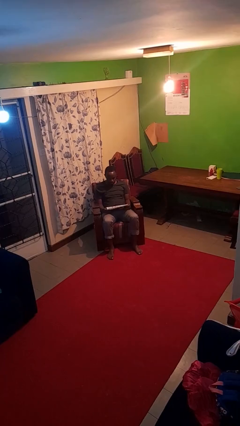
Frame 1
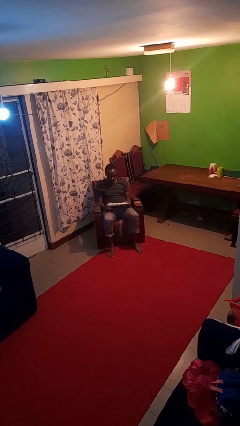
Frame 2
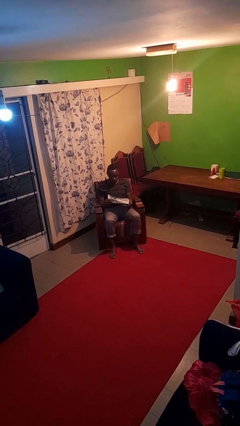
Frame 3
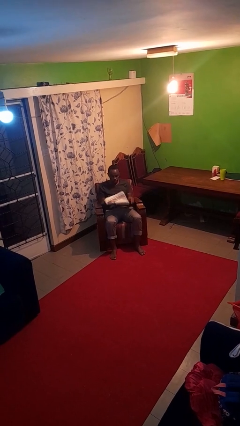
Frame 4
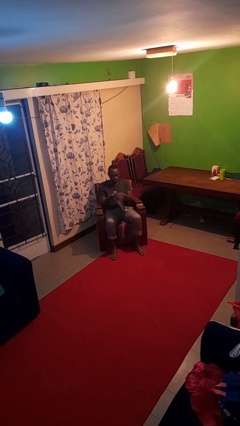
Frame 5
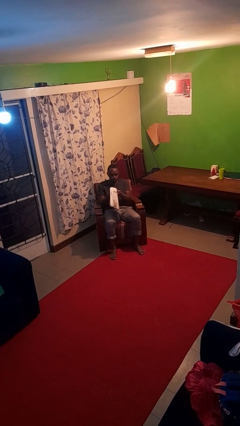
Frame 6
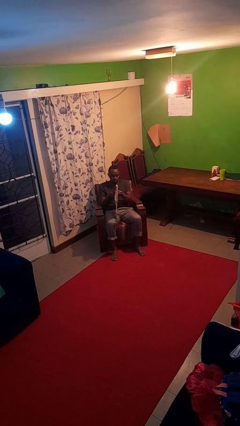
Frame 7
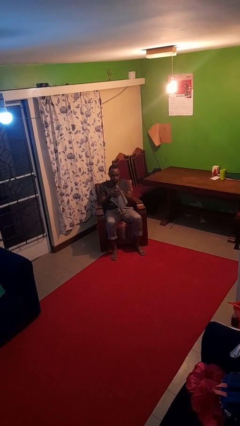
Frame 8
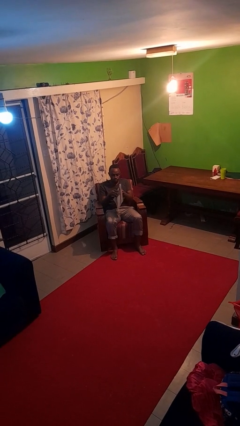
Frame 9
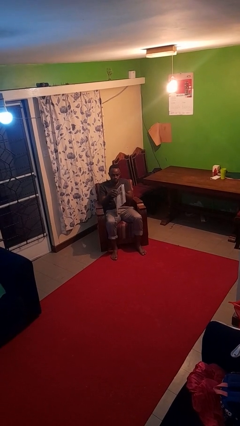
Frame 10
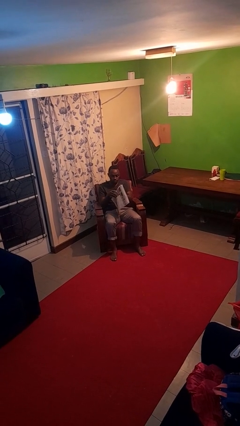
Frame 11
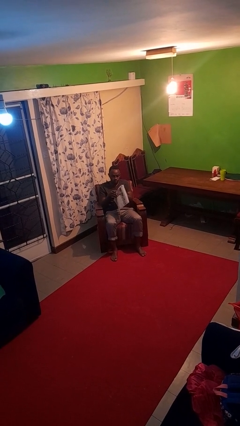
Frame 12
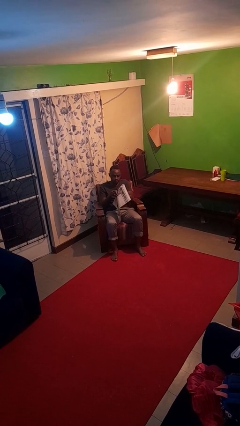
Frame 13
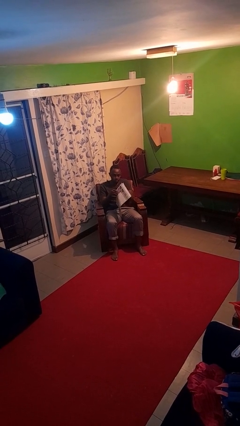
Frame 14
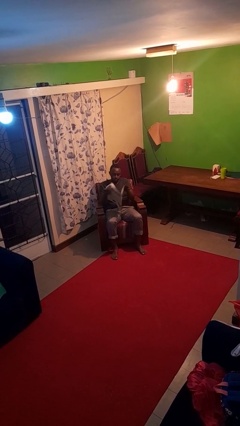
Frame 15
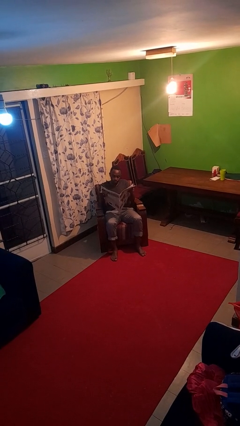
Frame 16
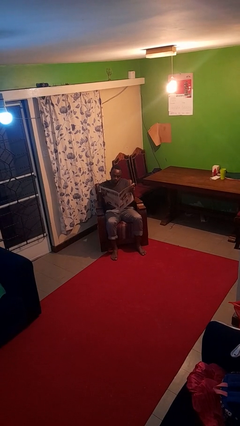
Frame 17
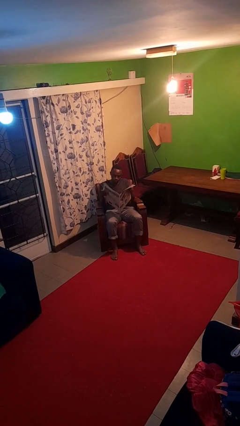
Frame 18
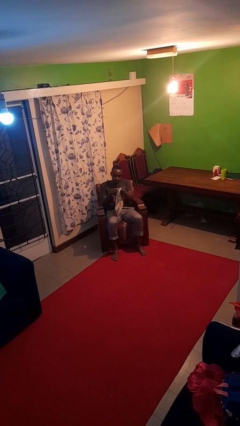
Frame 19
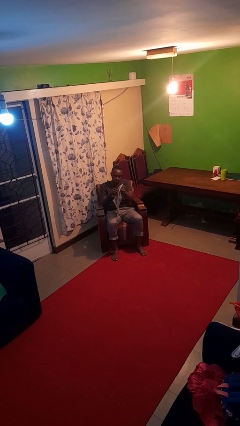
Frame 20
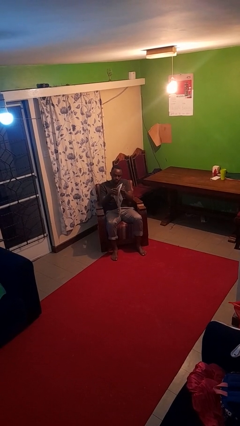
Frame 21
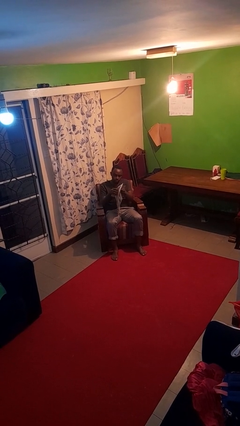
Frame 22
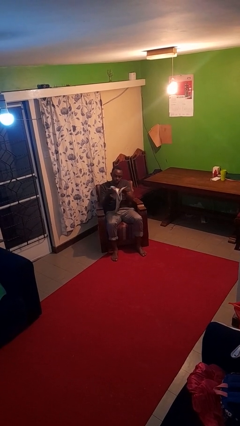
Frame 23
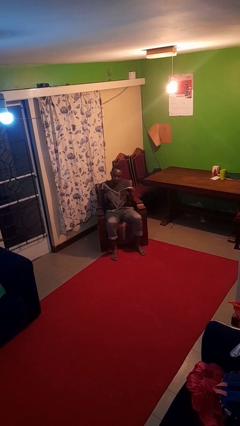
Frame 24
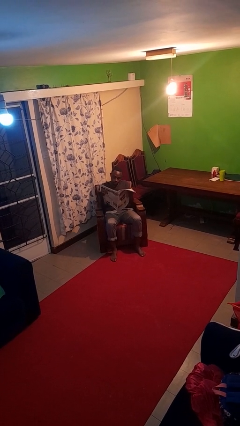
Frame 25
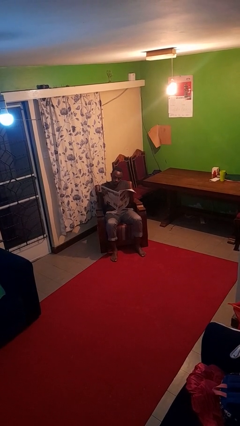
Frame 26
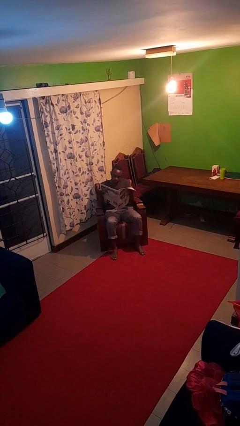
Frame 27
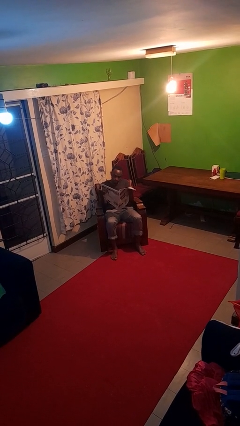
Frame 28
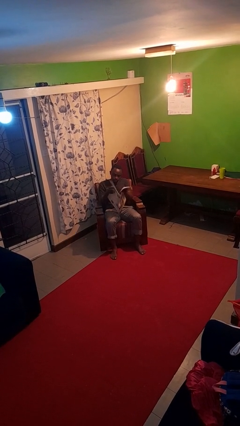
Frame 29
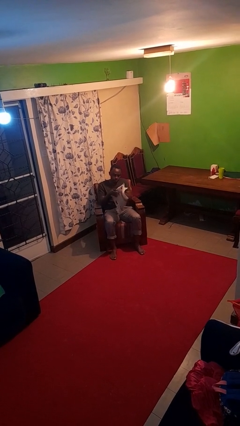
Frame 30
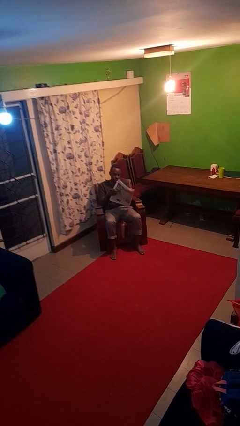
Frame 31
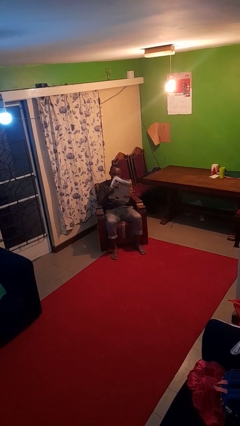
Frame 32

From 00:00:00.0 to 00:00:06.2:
person reads newspaper

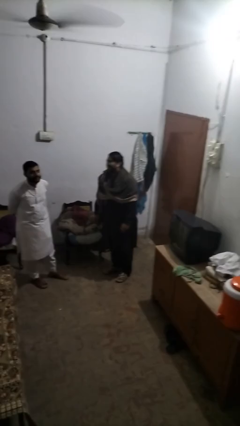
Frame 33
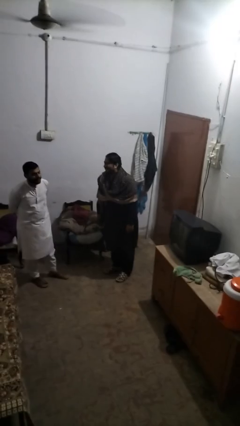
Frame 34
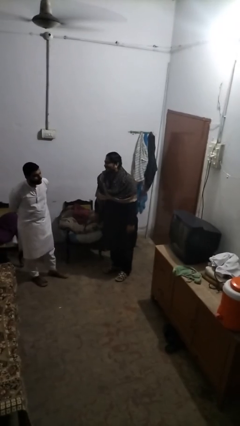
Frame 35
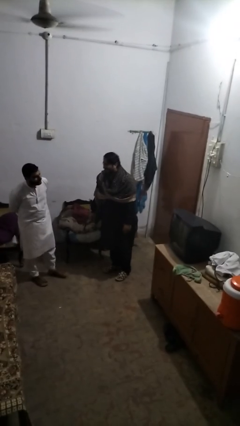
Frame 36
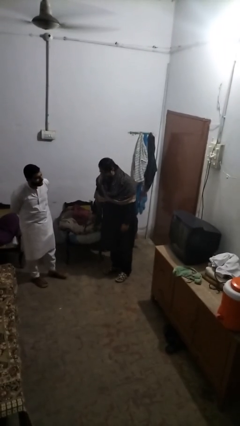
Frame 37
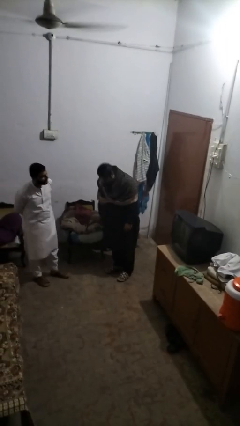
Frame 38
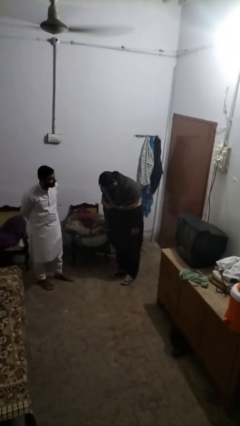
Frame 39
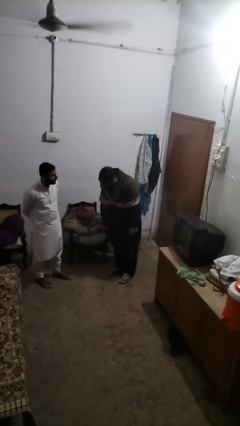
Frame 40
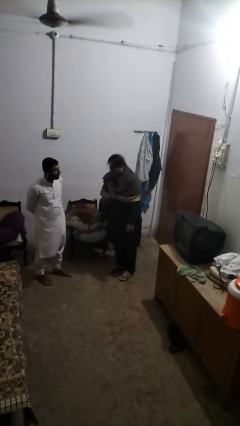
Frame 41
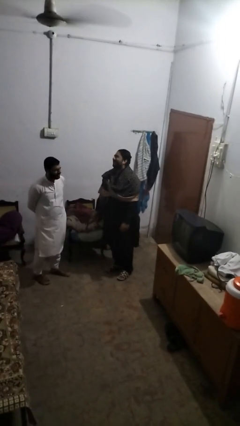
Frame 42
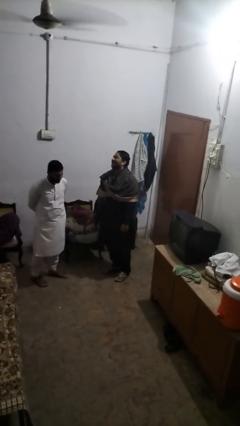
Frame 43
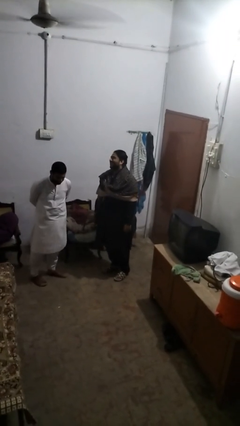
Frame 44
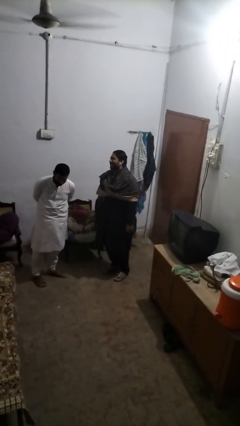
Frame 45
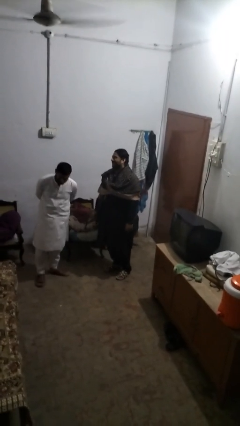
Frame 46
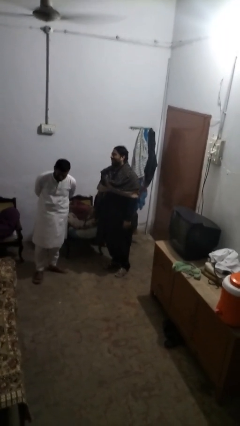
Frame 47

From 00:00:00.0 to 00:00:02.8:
person laughs with person

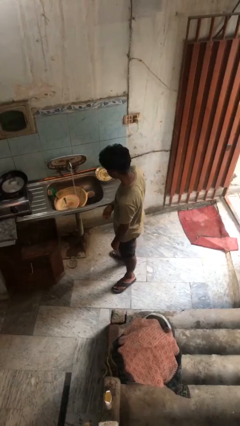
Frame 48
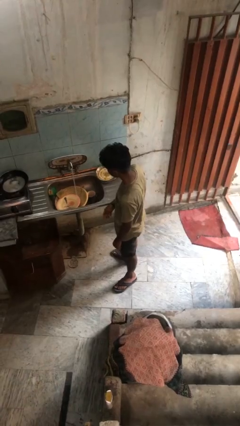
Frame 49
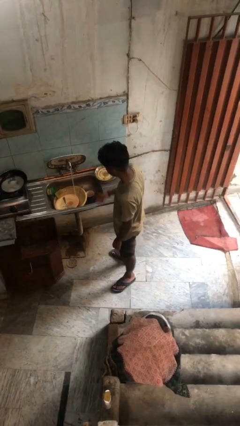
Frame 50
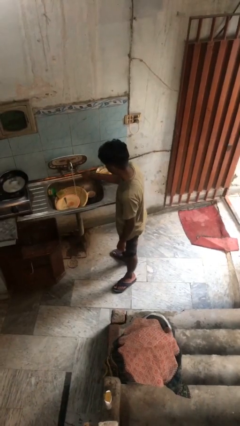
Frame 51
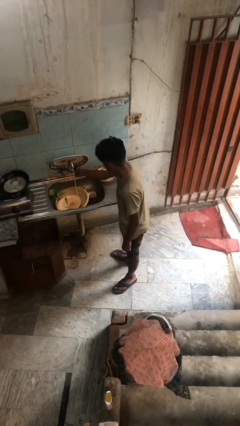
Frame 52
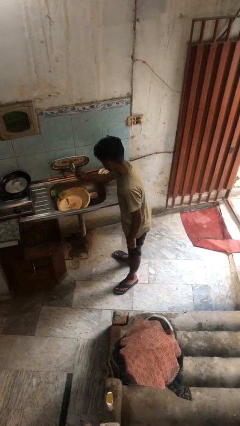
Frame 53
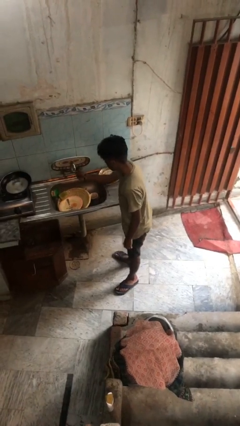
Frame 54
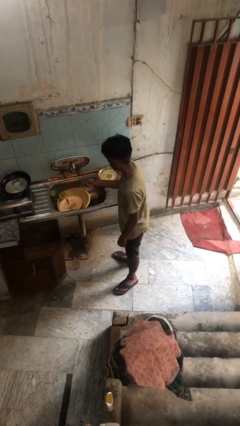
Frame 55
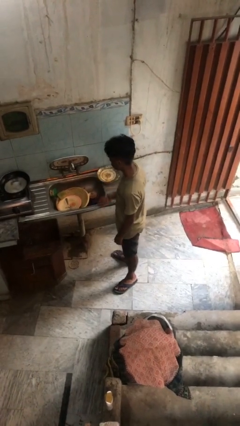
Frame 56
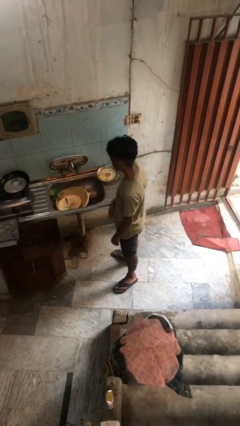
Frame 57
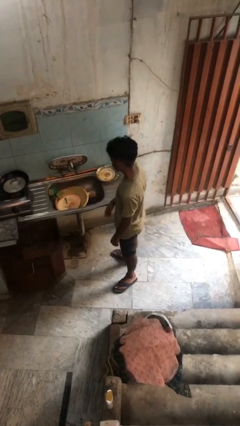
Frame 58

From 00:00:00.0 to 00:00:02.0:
person turns off faucet

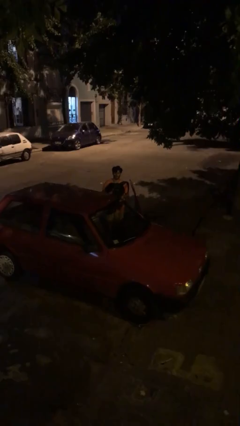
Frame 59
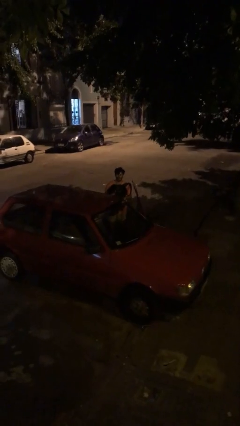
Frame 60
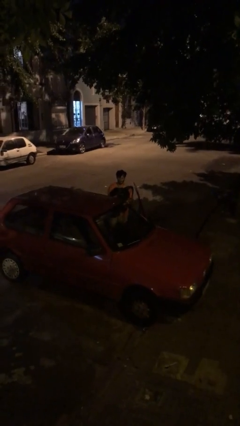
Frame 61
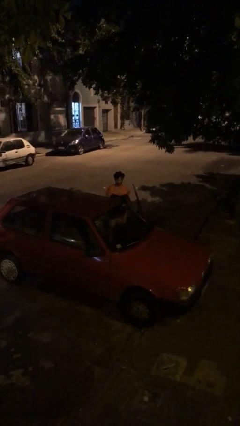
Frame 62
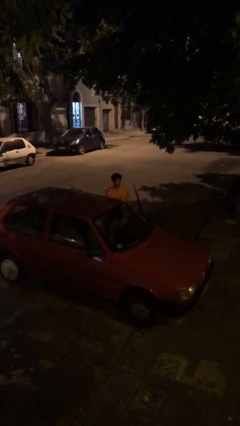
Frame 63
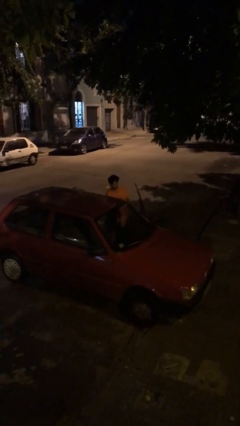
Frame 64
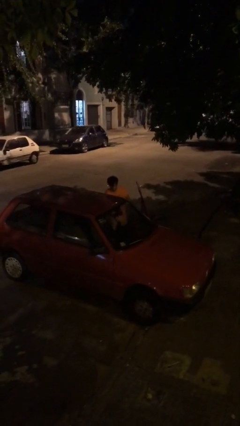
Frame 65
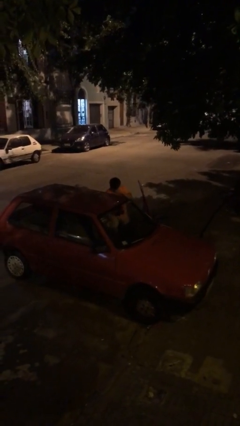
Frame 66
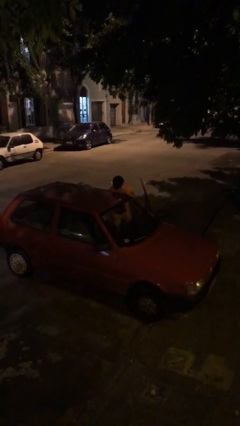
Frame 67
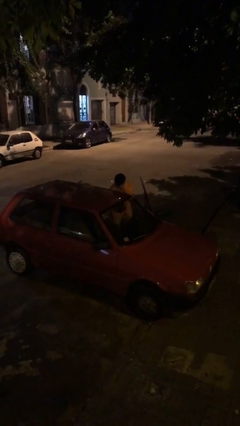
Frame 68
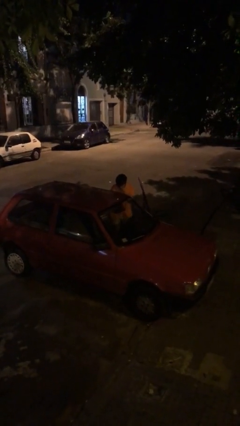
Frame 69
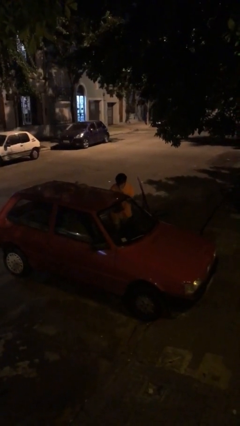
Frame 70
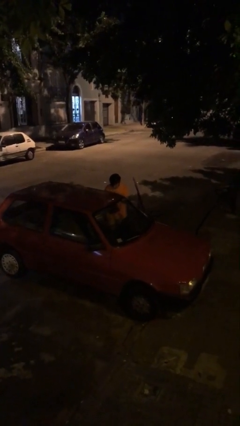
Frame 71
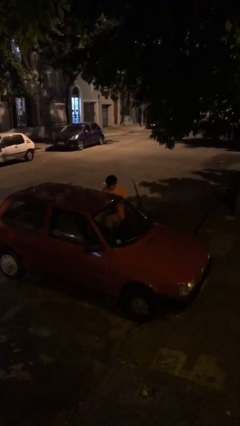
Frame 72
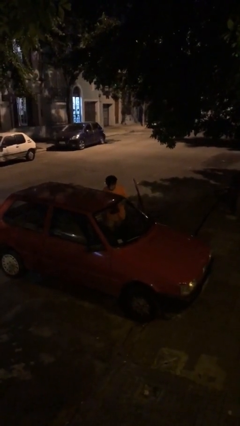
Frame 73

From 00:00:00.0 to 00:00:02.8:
person loads car

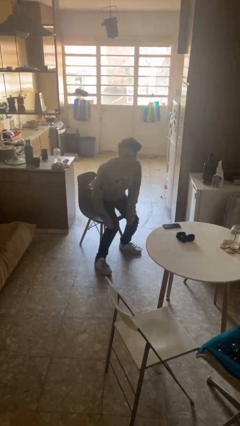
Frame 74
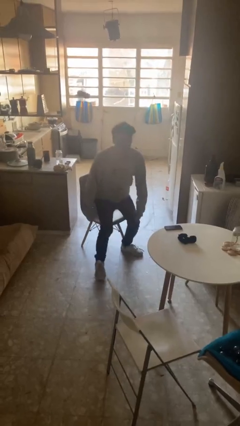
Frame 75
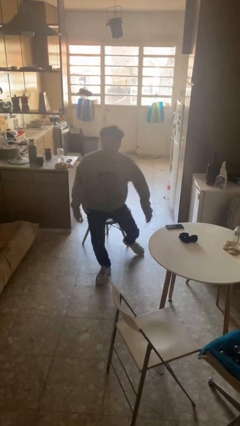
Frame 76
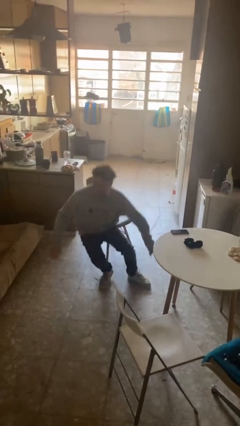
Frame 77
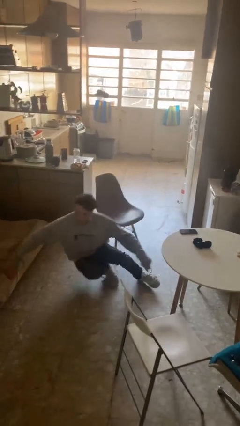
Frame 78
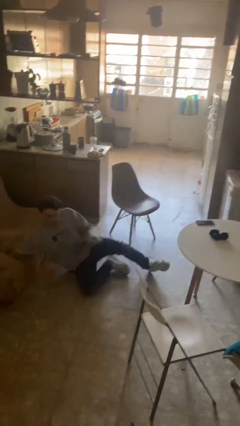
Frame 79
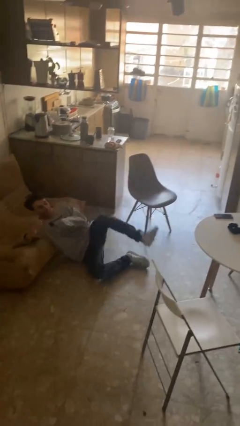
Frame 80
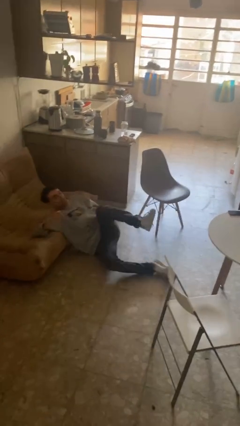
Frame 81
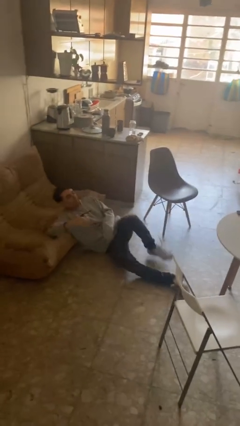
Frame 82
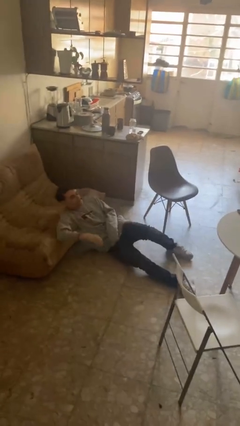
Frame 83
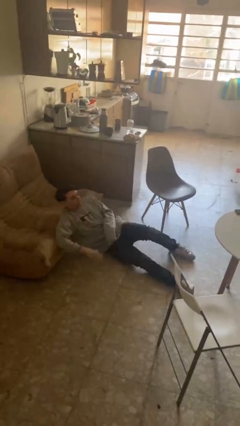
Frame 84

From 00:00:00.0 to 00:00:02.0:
person falls from chair

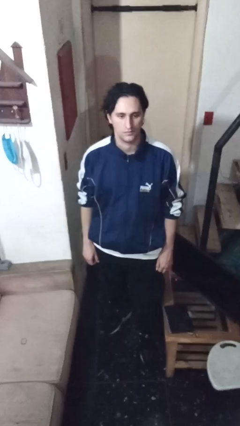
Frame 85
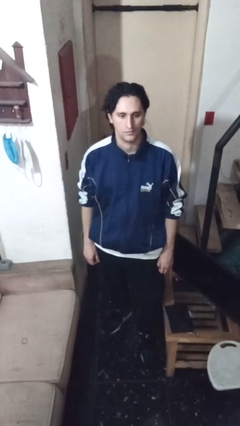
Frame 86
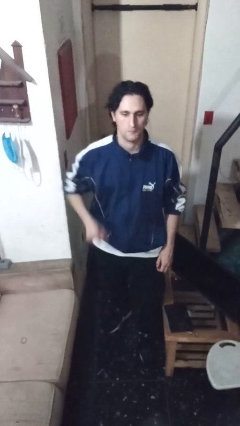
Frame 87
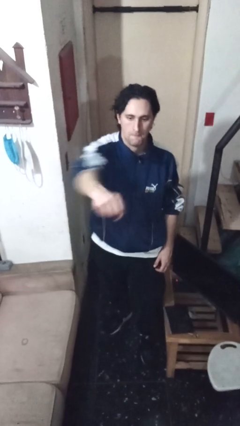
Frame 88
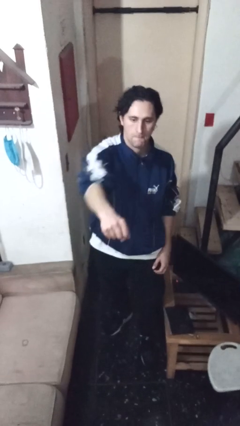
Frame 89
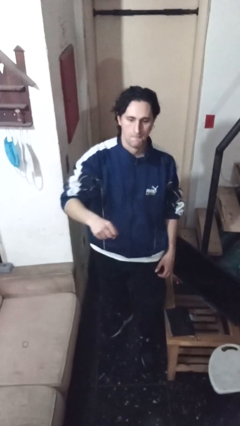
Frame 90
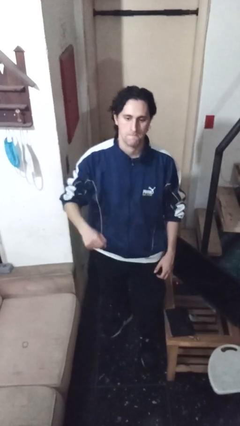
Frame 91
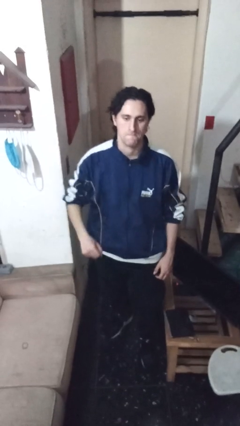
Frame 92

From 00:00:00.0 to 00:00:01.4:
person punches

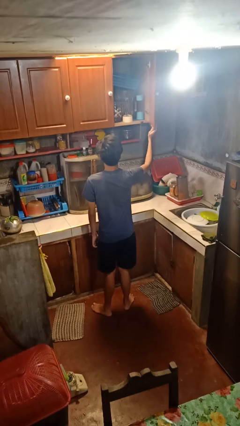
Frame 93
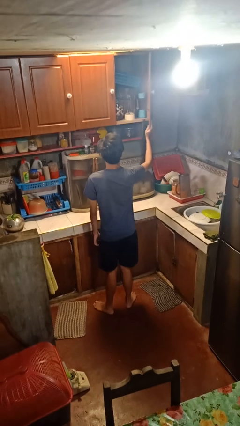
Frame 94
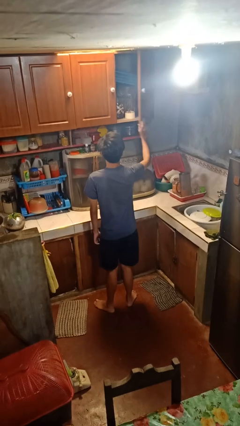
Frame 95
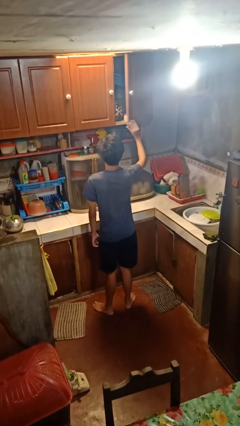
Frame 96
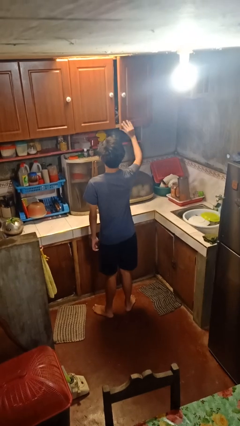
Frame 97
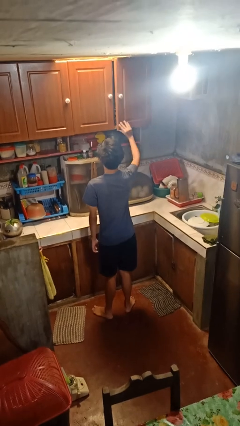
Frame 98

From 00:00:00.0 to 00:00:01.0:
person closes cabinet
